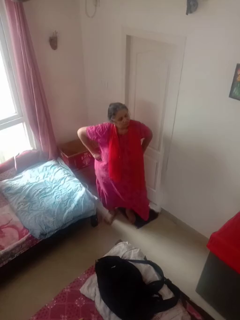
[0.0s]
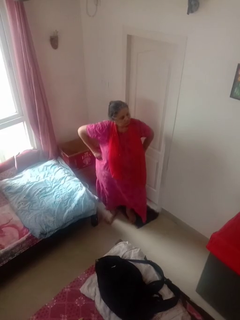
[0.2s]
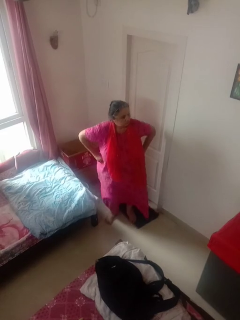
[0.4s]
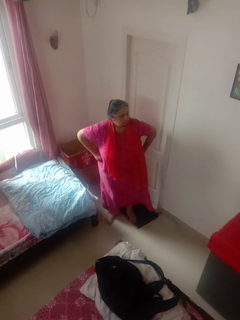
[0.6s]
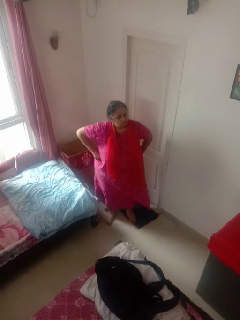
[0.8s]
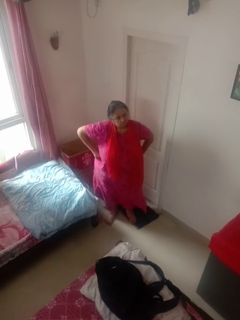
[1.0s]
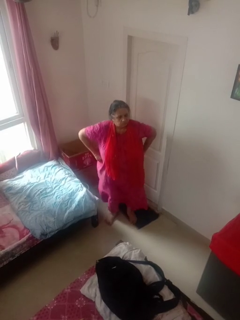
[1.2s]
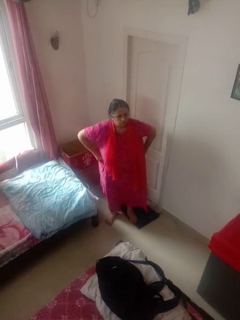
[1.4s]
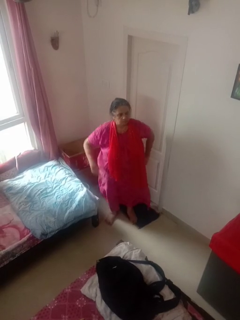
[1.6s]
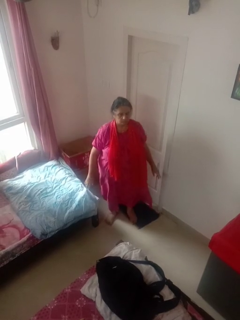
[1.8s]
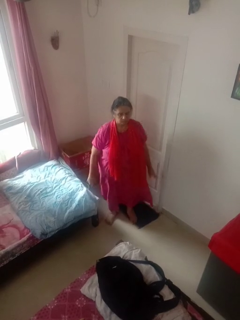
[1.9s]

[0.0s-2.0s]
person wiggles hips

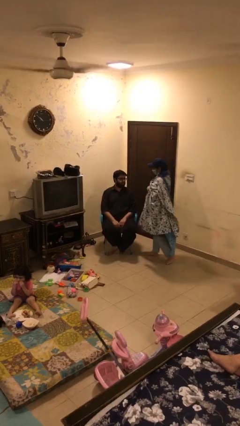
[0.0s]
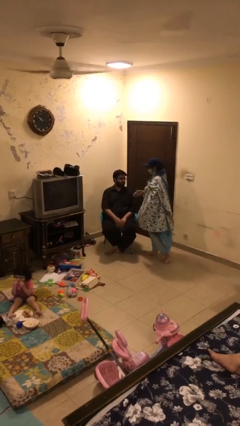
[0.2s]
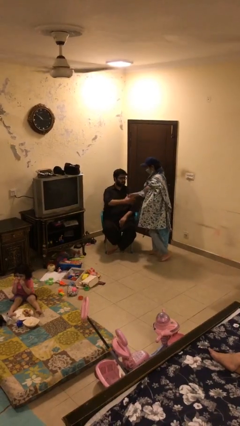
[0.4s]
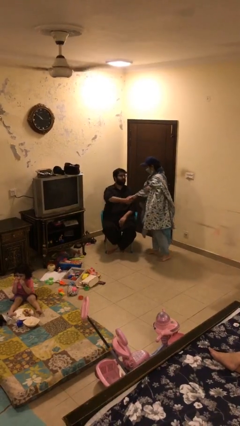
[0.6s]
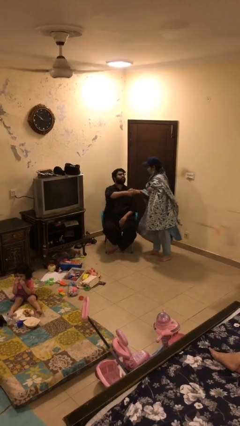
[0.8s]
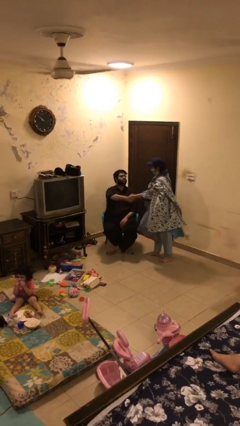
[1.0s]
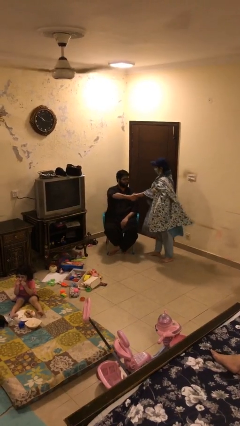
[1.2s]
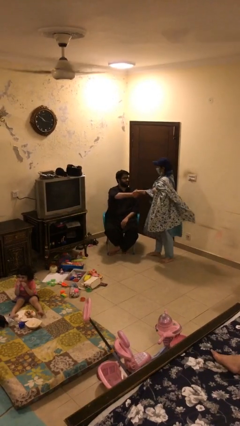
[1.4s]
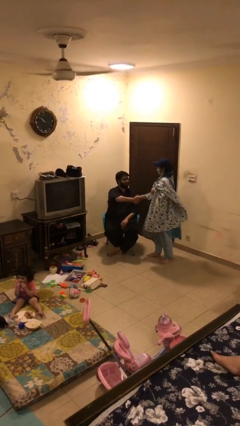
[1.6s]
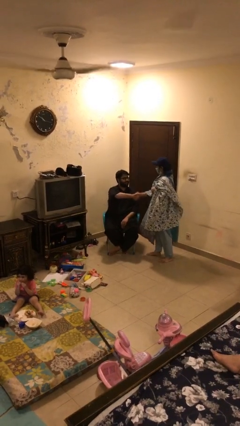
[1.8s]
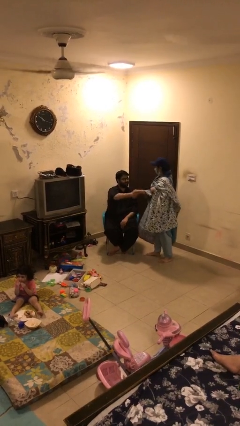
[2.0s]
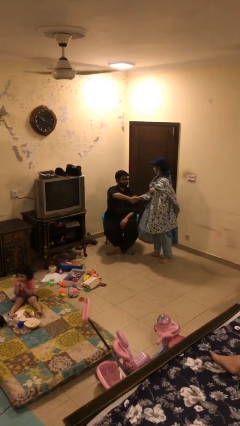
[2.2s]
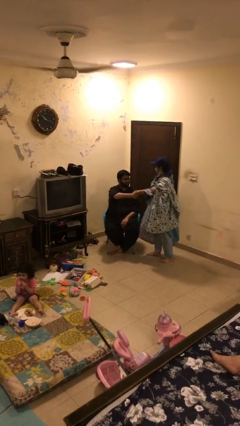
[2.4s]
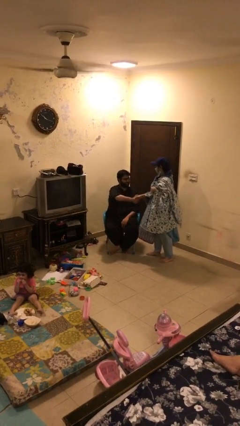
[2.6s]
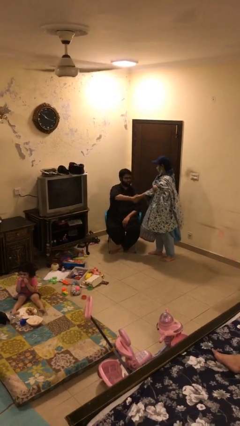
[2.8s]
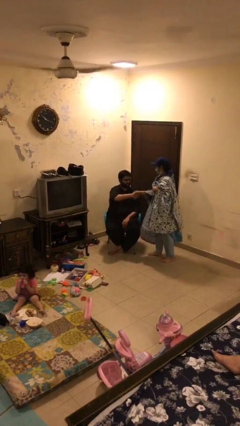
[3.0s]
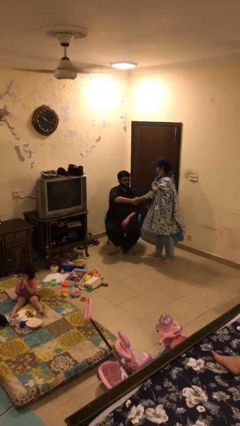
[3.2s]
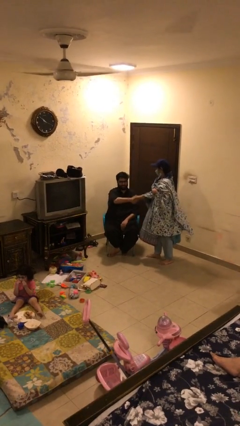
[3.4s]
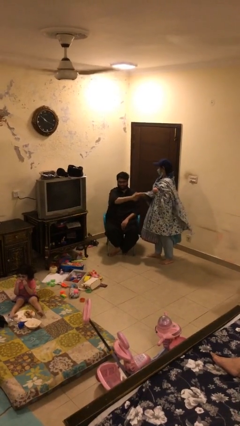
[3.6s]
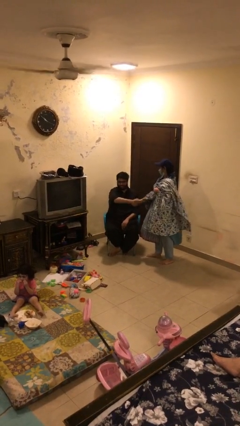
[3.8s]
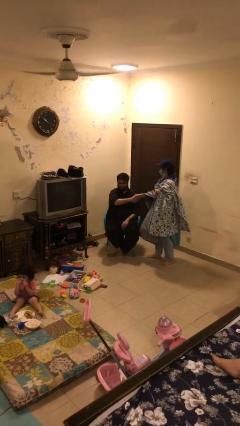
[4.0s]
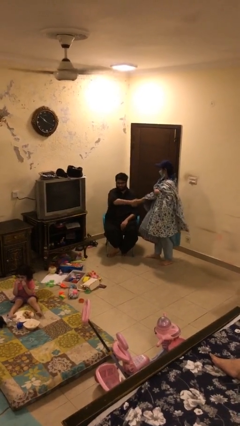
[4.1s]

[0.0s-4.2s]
person shakes hand

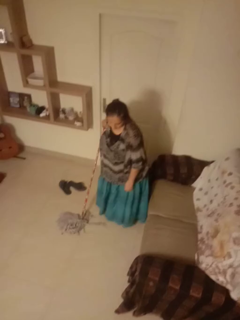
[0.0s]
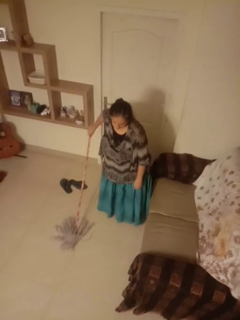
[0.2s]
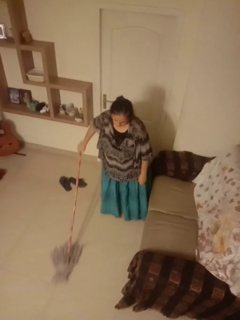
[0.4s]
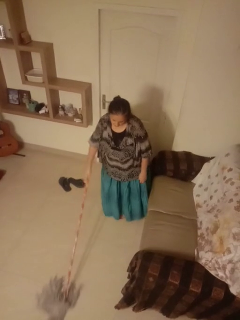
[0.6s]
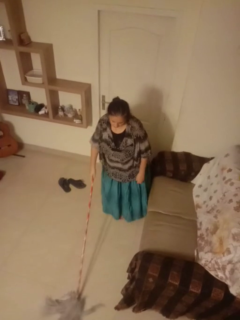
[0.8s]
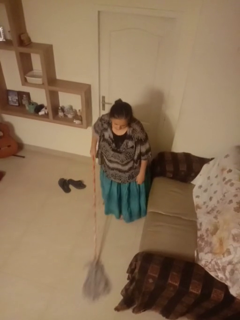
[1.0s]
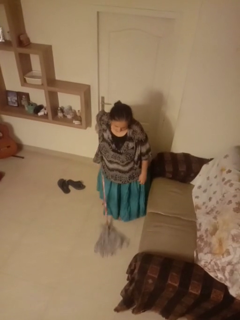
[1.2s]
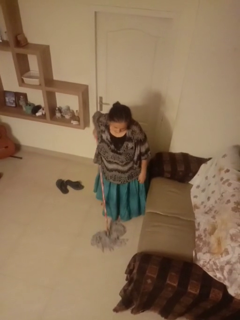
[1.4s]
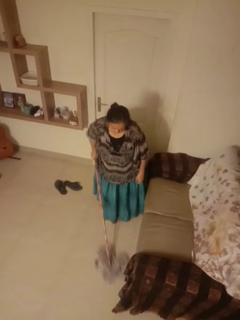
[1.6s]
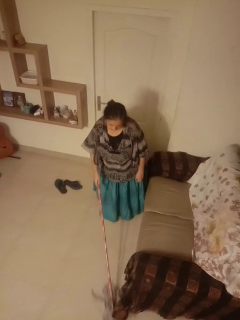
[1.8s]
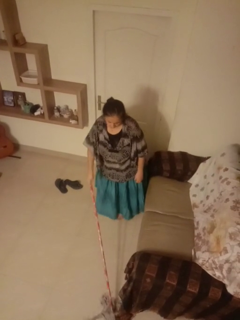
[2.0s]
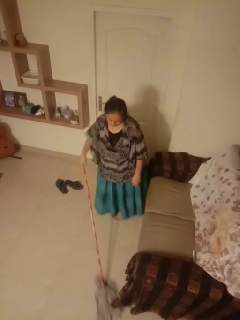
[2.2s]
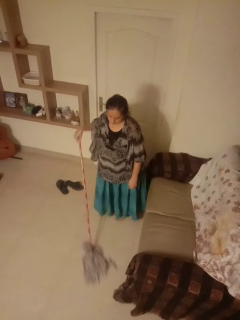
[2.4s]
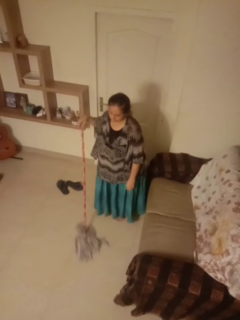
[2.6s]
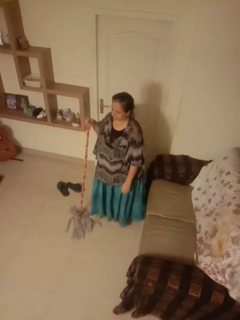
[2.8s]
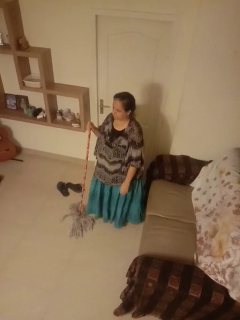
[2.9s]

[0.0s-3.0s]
person mops

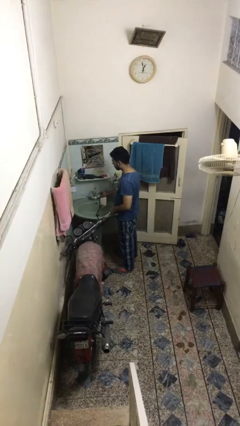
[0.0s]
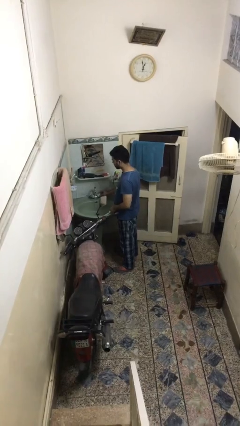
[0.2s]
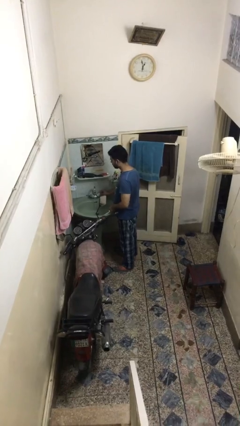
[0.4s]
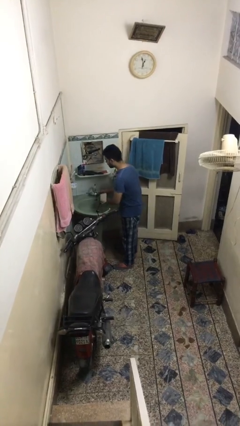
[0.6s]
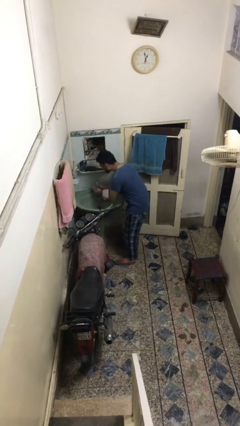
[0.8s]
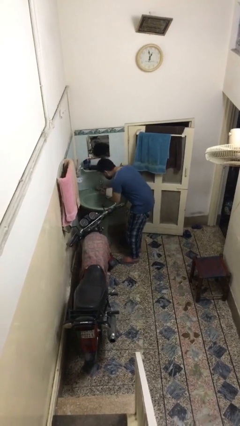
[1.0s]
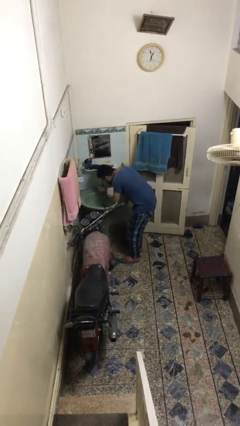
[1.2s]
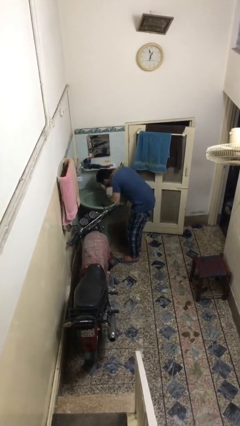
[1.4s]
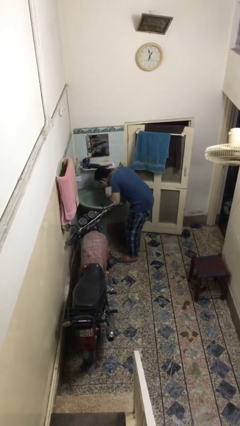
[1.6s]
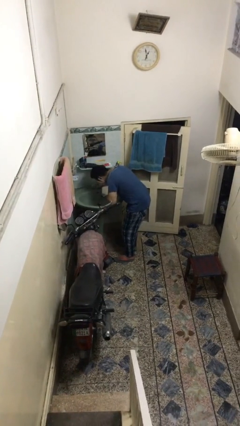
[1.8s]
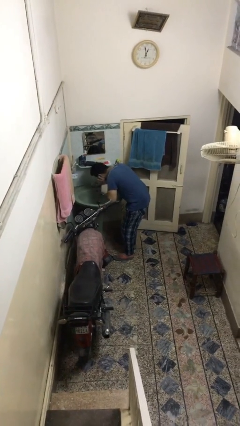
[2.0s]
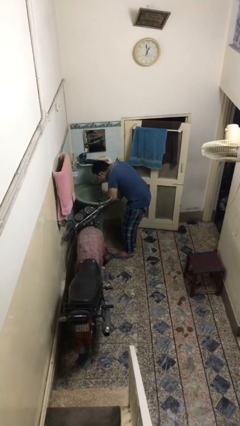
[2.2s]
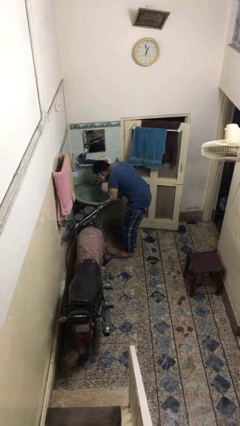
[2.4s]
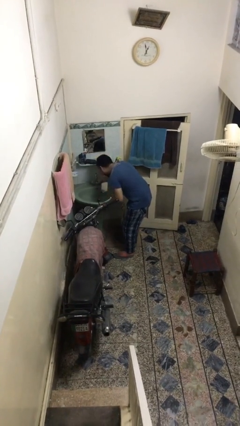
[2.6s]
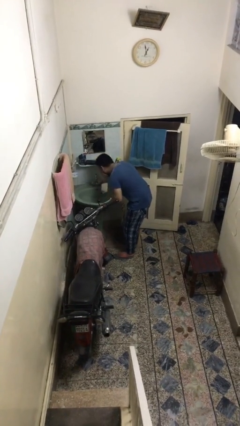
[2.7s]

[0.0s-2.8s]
person washes face

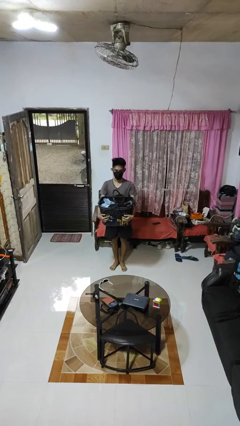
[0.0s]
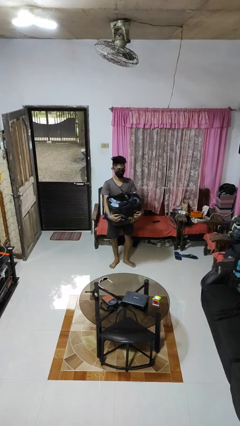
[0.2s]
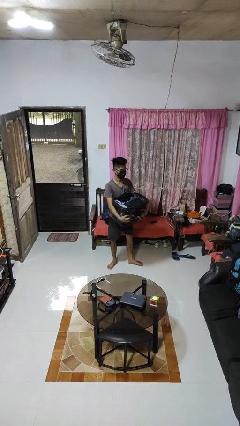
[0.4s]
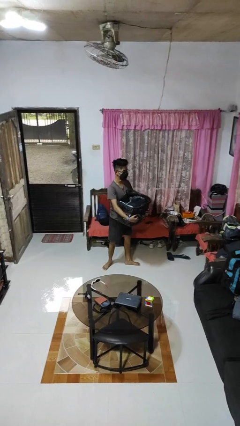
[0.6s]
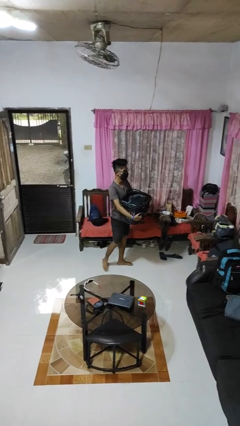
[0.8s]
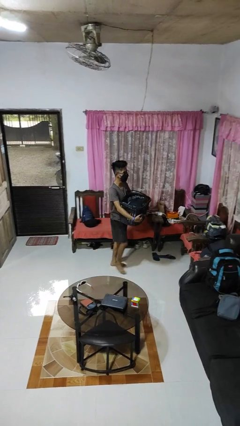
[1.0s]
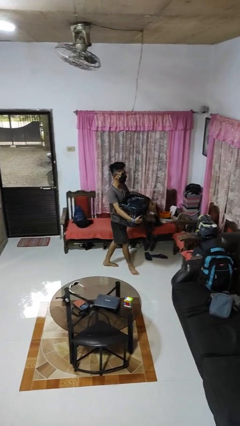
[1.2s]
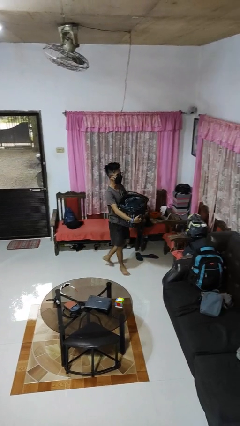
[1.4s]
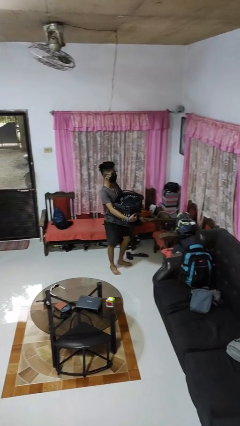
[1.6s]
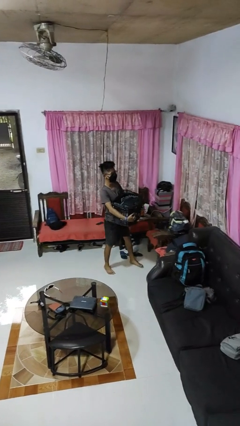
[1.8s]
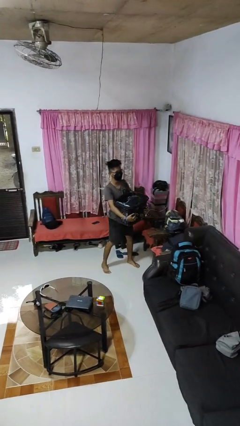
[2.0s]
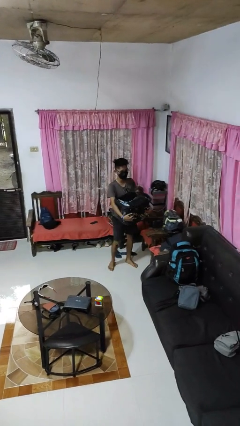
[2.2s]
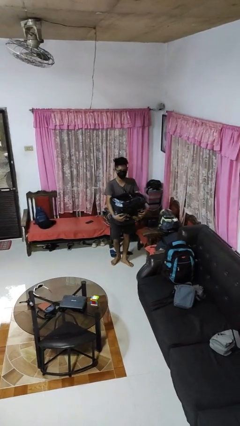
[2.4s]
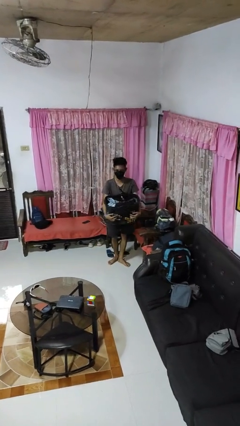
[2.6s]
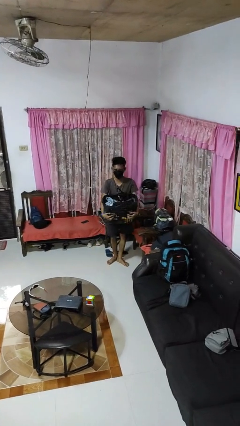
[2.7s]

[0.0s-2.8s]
person carries laundry basket

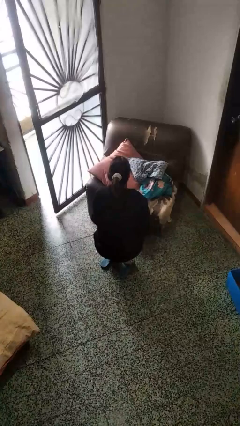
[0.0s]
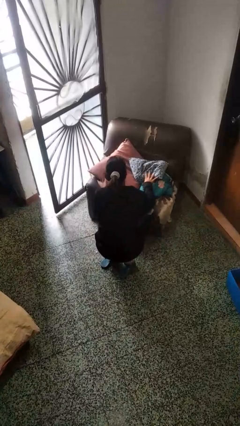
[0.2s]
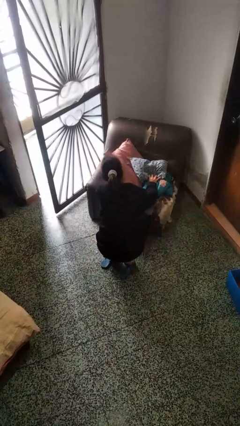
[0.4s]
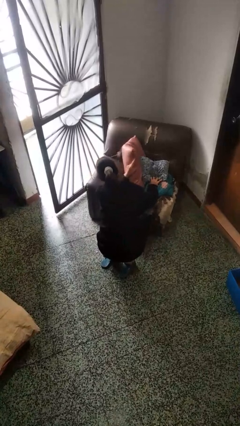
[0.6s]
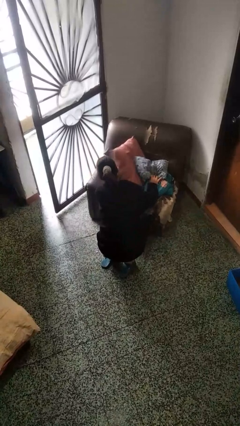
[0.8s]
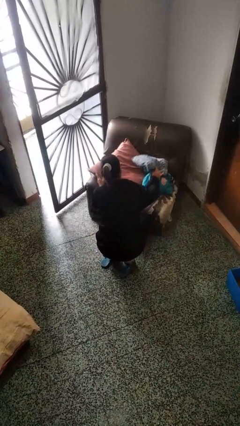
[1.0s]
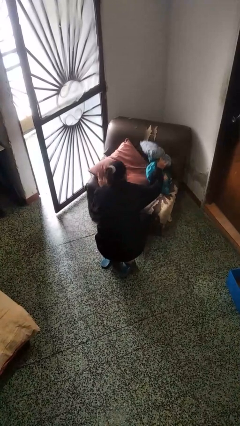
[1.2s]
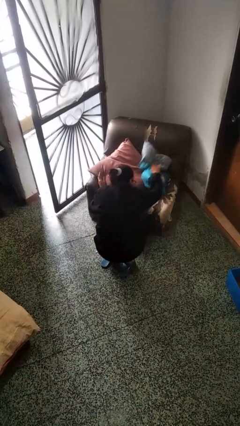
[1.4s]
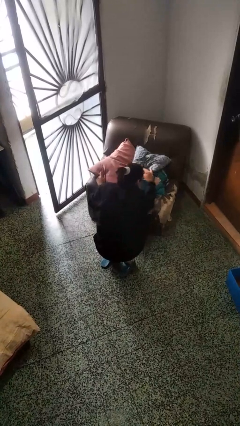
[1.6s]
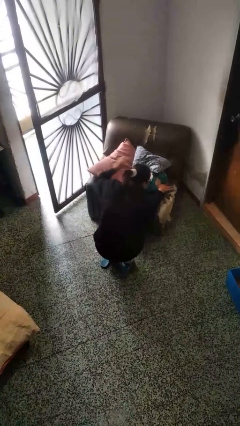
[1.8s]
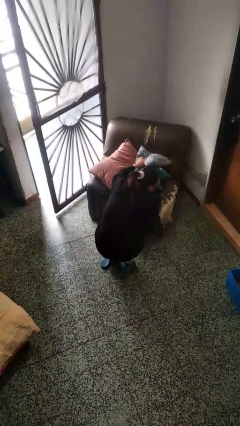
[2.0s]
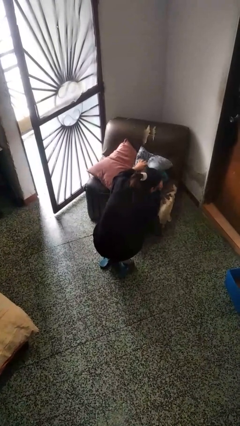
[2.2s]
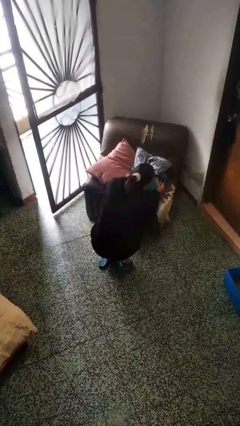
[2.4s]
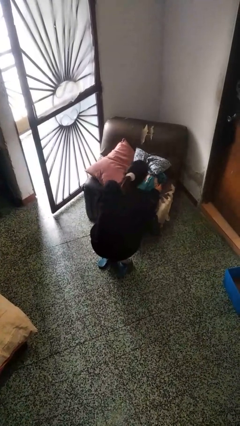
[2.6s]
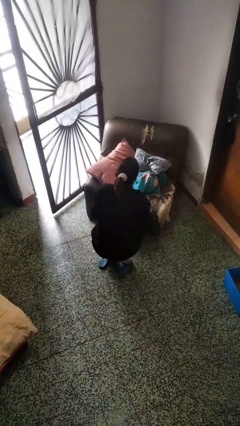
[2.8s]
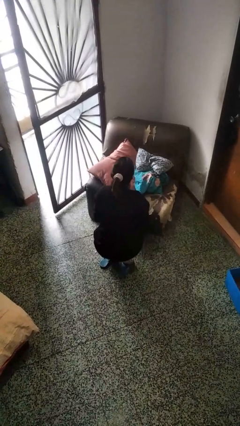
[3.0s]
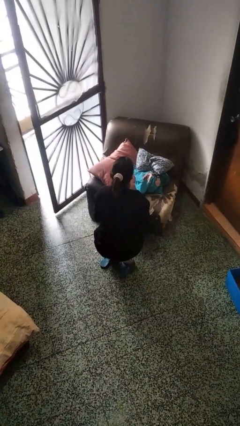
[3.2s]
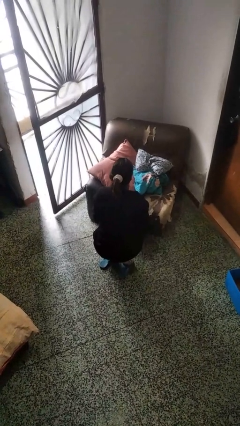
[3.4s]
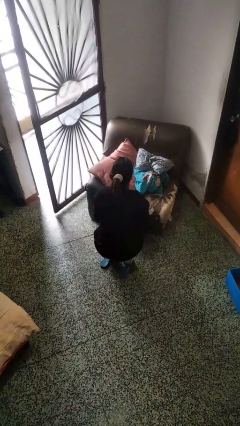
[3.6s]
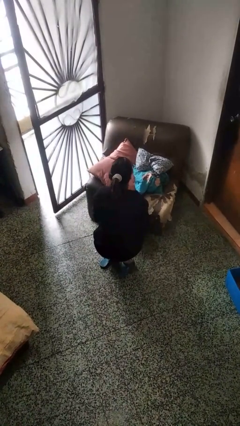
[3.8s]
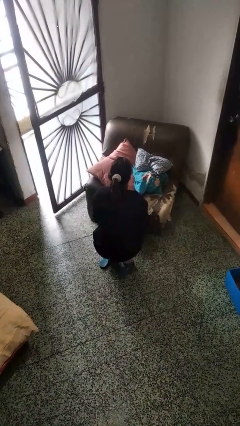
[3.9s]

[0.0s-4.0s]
person searches in couch

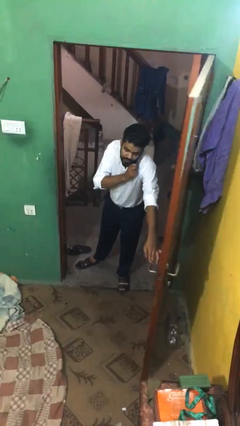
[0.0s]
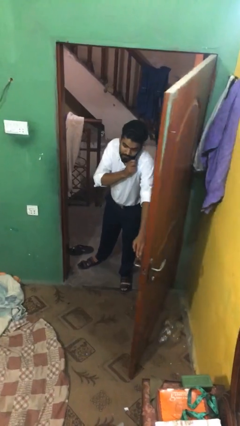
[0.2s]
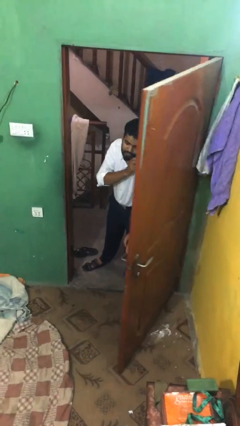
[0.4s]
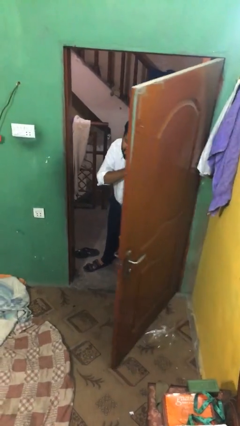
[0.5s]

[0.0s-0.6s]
person closes facility door
